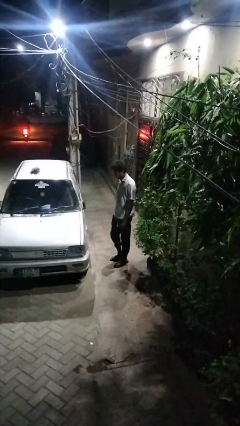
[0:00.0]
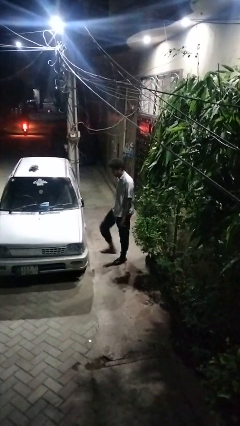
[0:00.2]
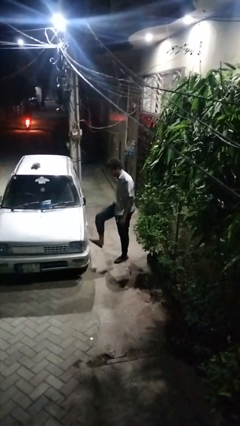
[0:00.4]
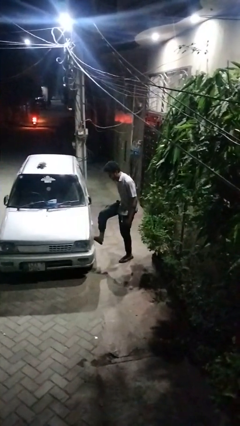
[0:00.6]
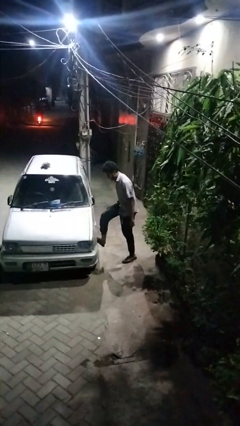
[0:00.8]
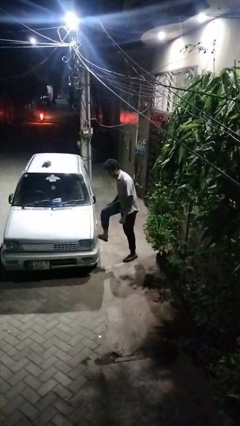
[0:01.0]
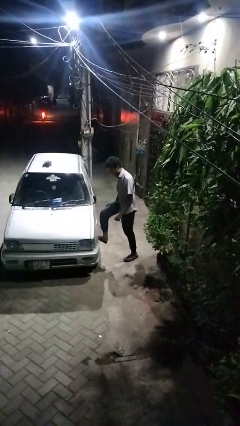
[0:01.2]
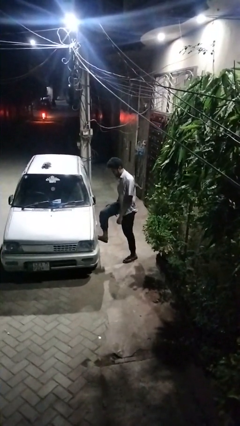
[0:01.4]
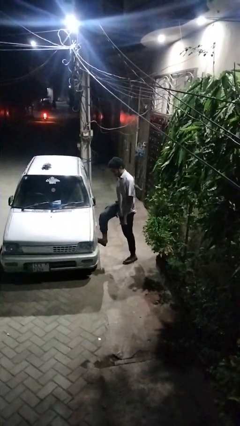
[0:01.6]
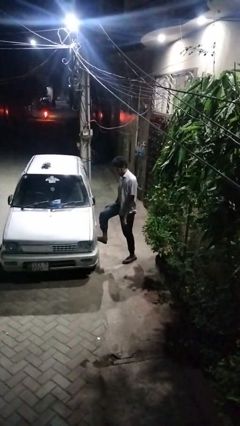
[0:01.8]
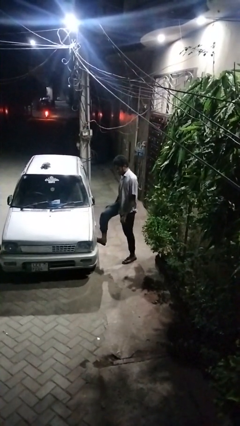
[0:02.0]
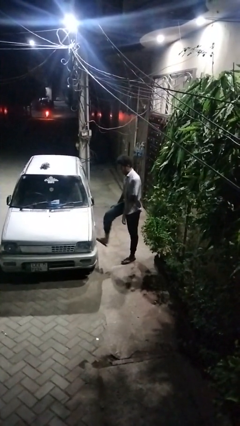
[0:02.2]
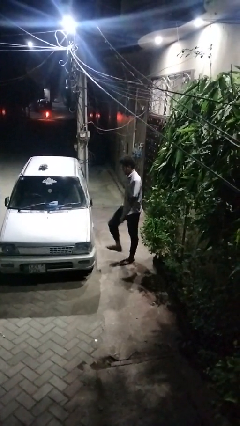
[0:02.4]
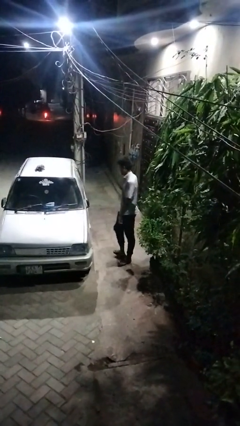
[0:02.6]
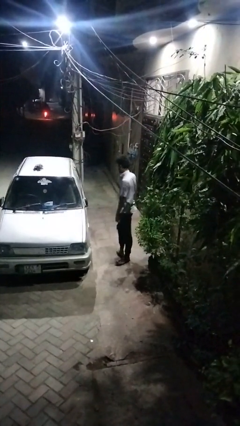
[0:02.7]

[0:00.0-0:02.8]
person kicks car tires

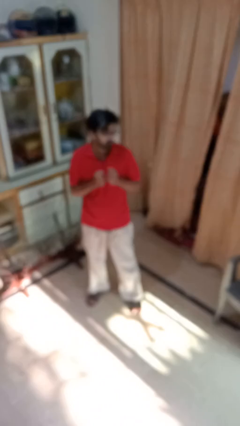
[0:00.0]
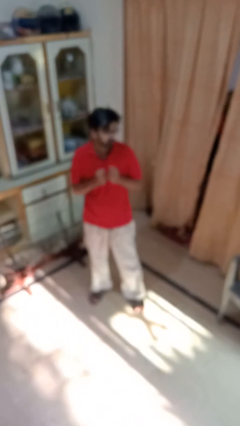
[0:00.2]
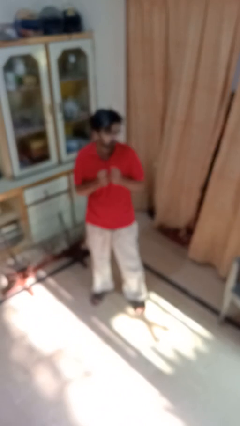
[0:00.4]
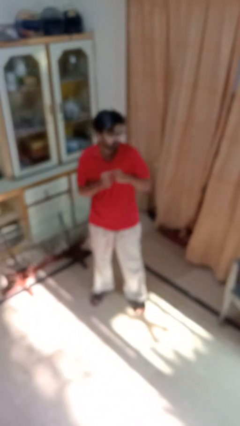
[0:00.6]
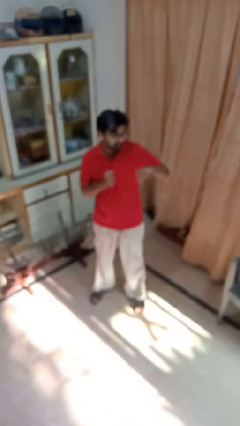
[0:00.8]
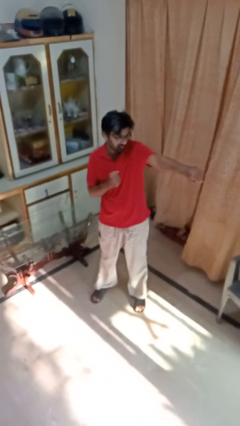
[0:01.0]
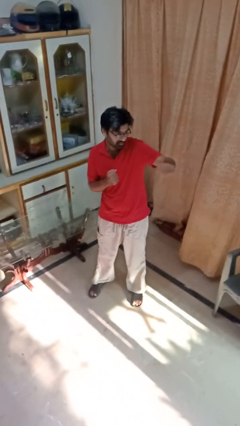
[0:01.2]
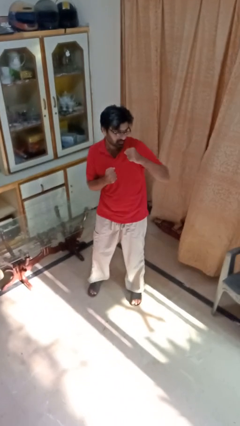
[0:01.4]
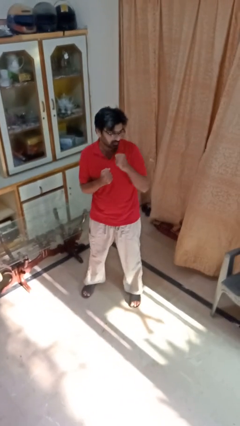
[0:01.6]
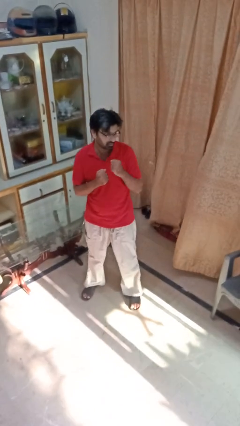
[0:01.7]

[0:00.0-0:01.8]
person punches

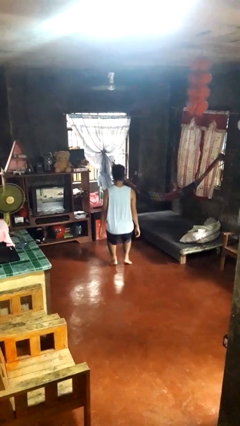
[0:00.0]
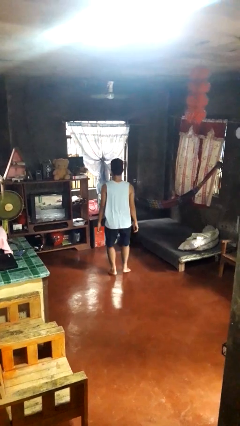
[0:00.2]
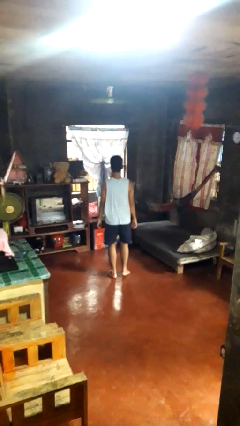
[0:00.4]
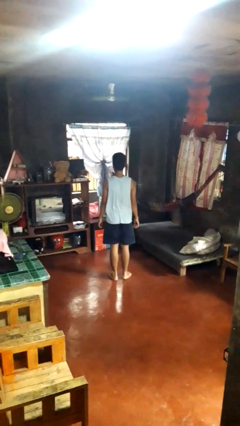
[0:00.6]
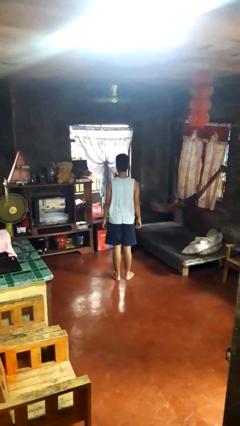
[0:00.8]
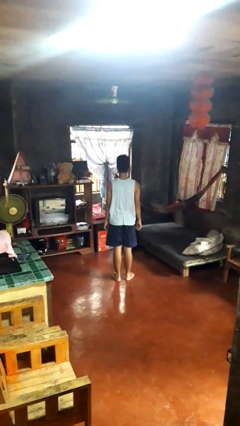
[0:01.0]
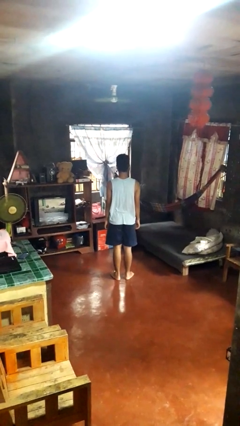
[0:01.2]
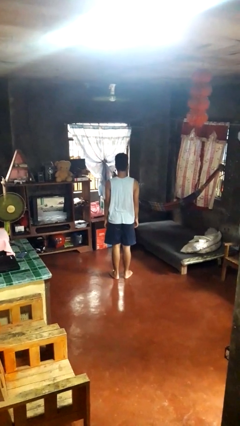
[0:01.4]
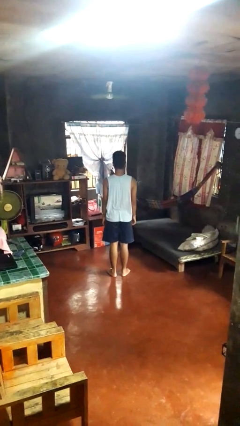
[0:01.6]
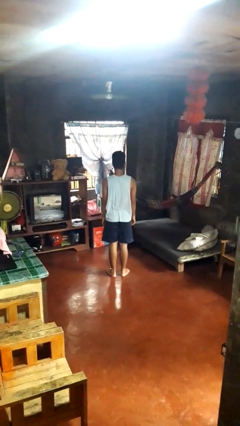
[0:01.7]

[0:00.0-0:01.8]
person stands up

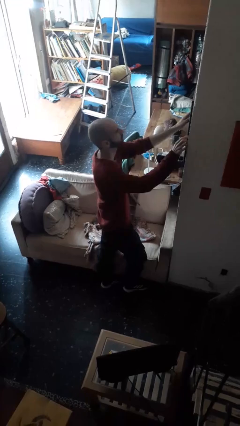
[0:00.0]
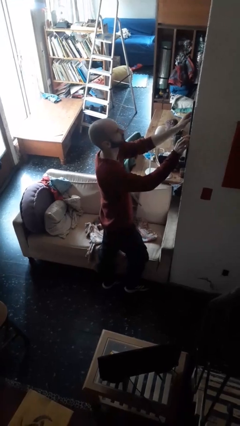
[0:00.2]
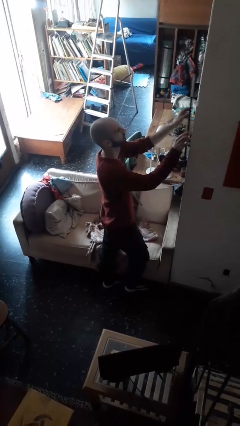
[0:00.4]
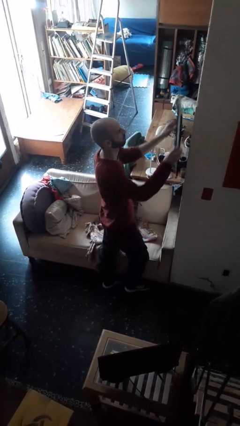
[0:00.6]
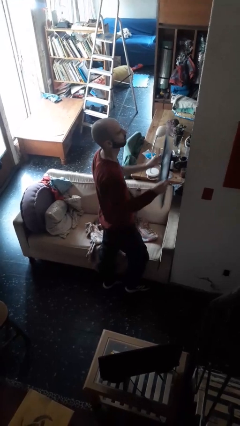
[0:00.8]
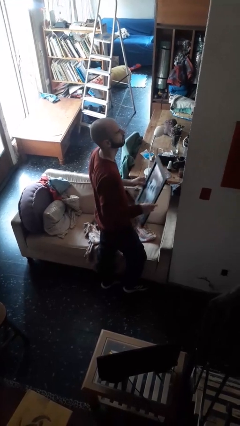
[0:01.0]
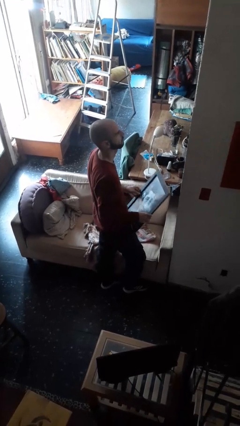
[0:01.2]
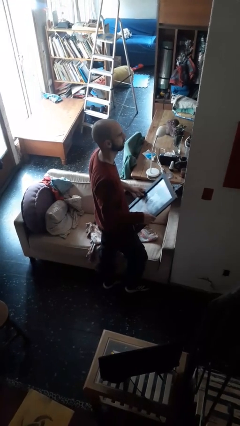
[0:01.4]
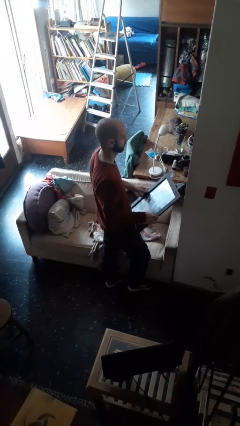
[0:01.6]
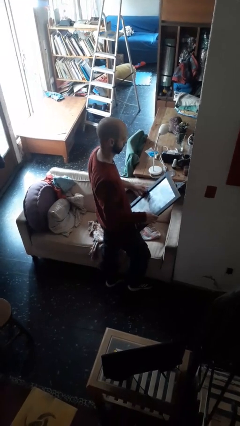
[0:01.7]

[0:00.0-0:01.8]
person takes down picture frame

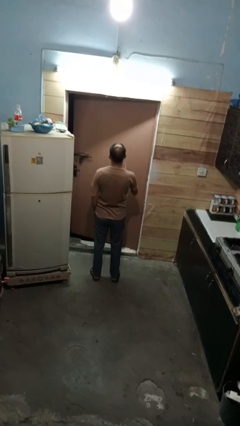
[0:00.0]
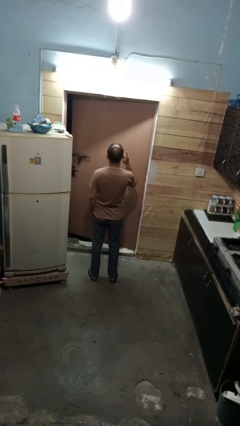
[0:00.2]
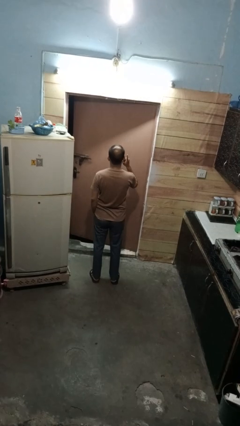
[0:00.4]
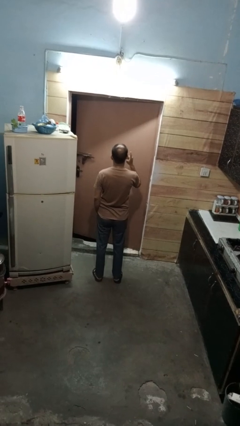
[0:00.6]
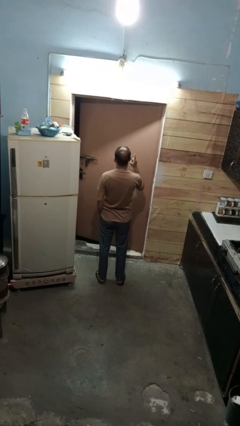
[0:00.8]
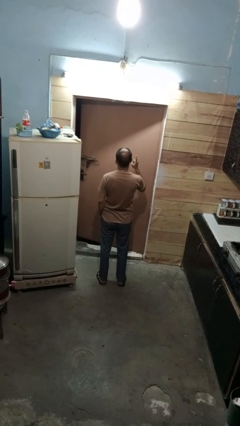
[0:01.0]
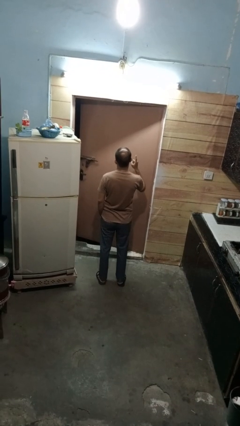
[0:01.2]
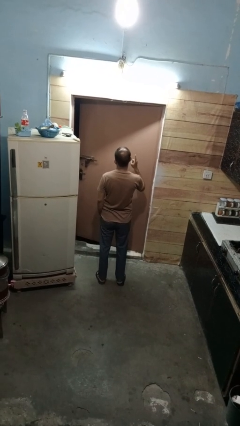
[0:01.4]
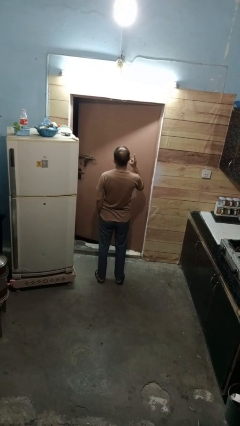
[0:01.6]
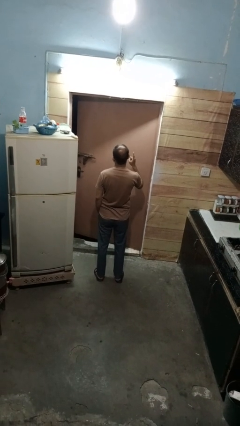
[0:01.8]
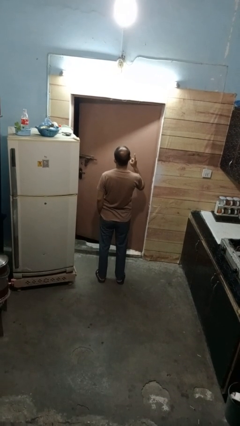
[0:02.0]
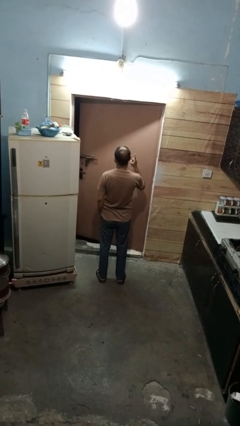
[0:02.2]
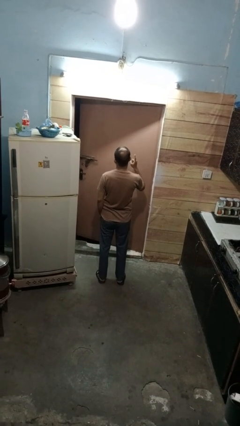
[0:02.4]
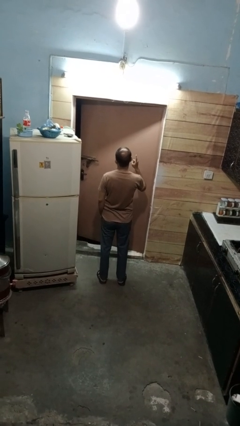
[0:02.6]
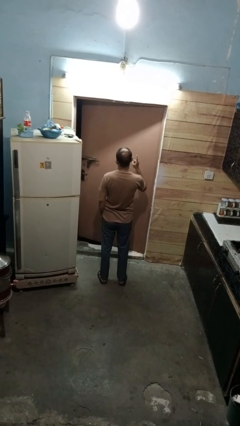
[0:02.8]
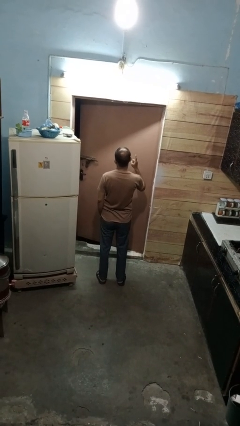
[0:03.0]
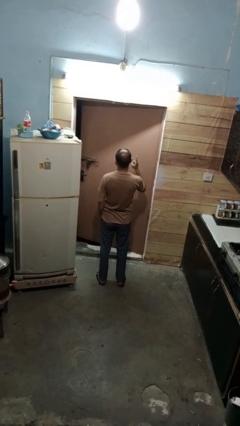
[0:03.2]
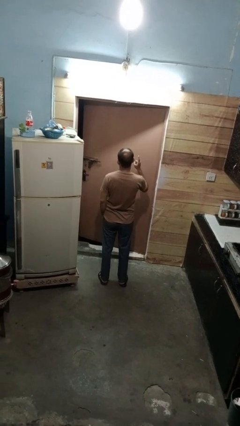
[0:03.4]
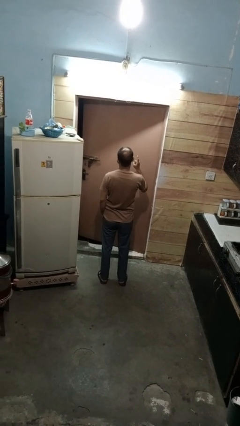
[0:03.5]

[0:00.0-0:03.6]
person gestures number one

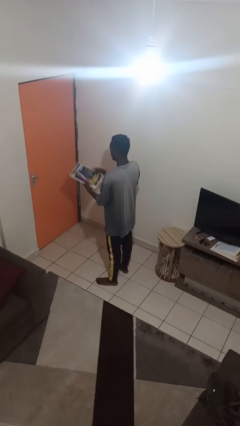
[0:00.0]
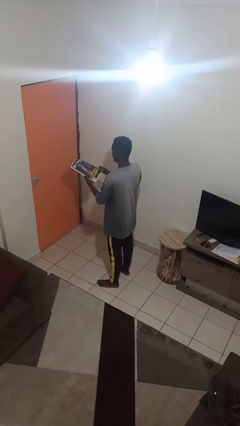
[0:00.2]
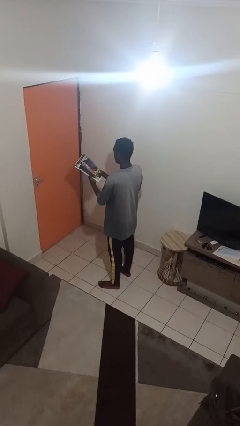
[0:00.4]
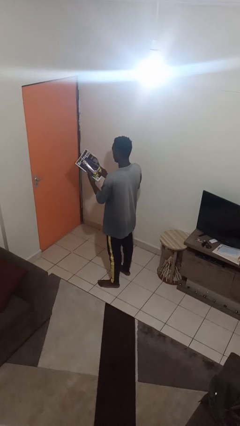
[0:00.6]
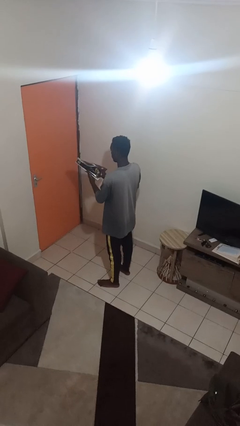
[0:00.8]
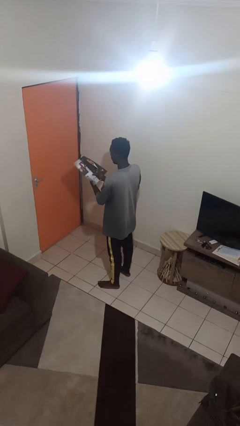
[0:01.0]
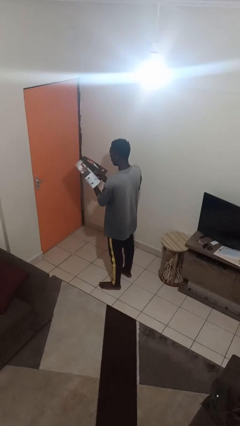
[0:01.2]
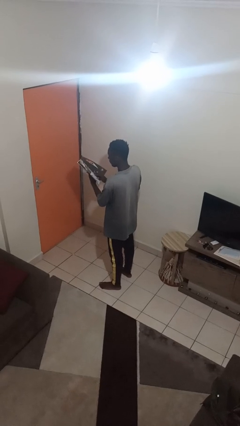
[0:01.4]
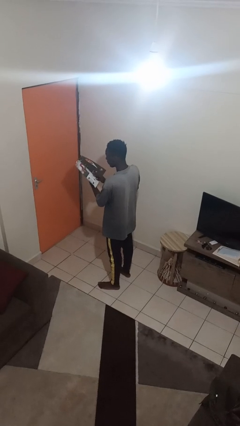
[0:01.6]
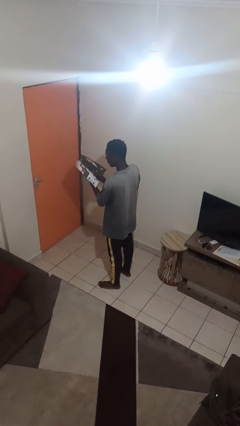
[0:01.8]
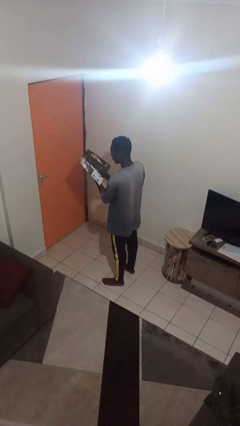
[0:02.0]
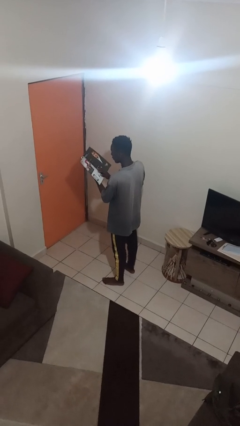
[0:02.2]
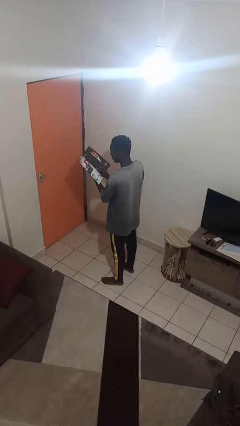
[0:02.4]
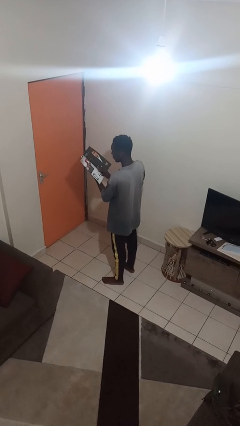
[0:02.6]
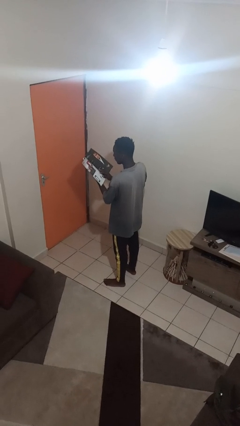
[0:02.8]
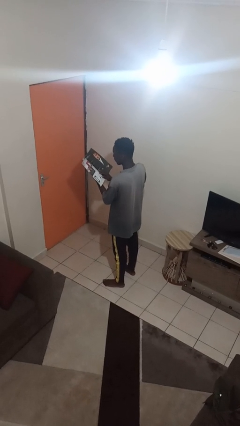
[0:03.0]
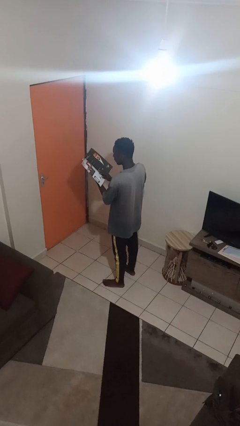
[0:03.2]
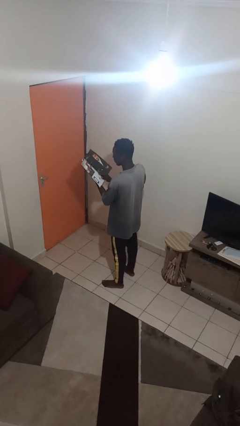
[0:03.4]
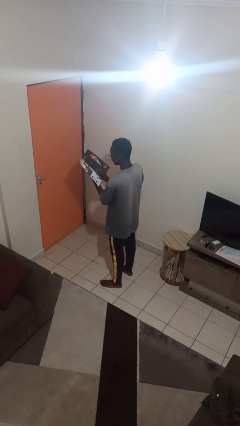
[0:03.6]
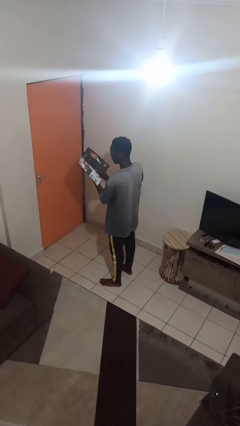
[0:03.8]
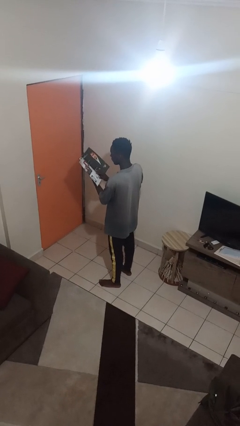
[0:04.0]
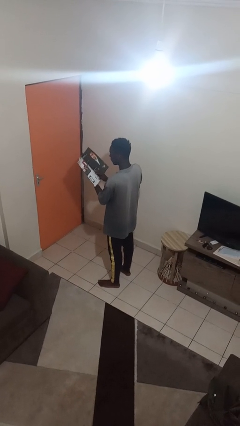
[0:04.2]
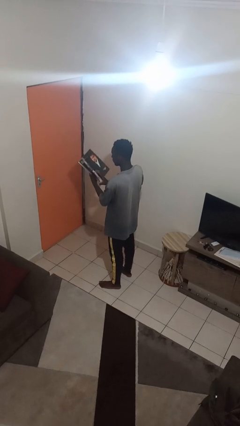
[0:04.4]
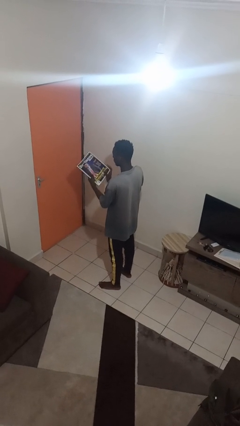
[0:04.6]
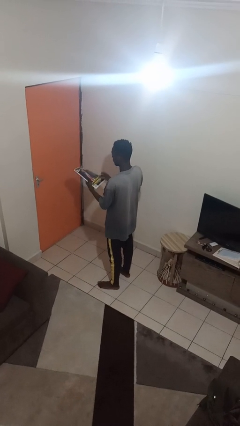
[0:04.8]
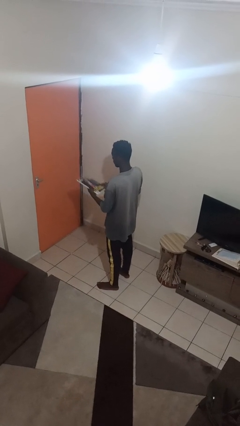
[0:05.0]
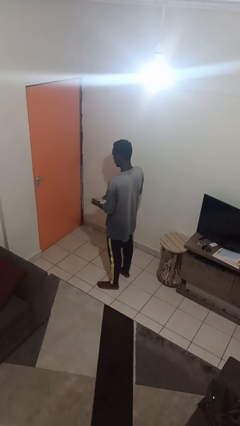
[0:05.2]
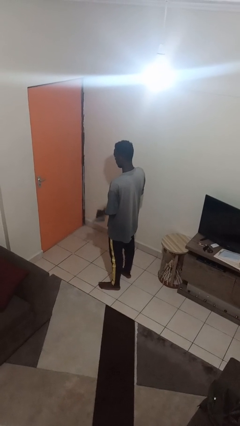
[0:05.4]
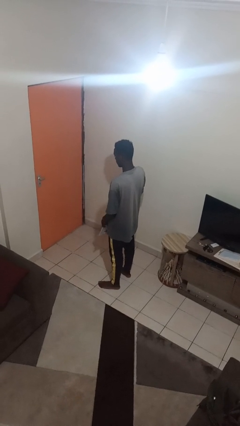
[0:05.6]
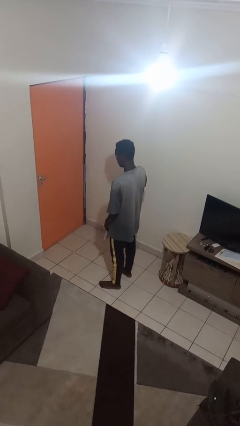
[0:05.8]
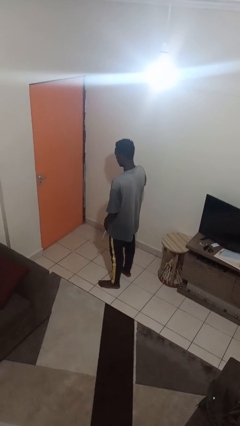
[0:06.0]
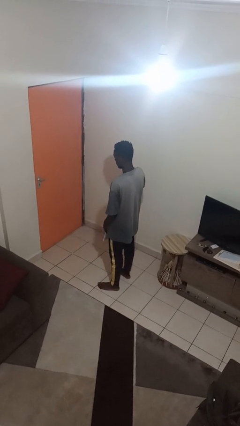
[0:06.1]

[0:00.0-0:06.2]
person reads magazine
